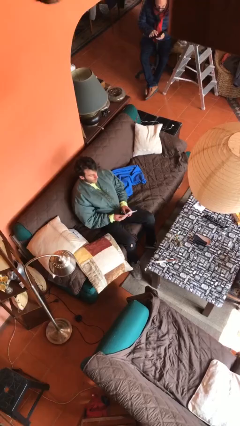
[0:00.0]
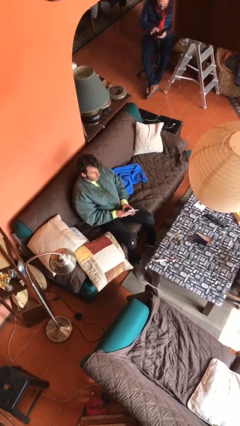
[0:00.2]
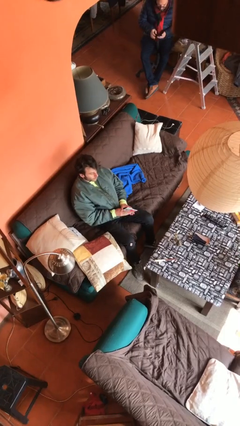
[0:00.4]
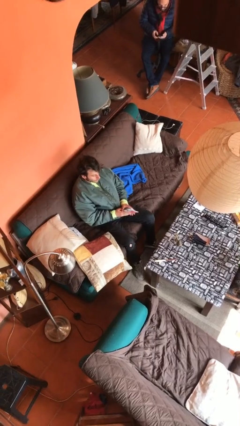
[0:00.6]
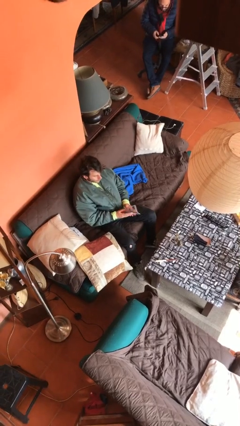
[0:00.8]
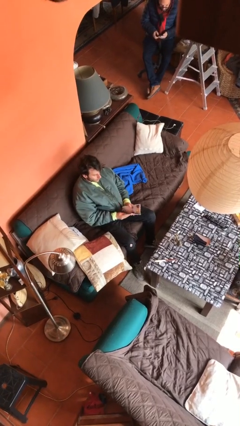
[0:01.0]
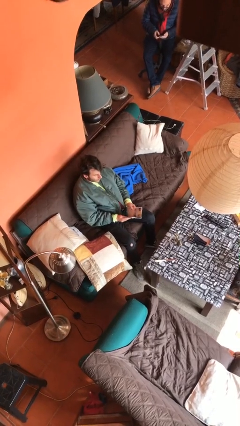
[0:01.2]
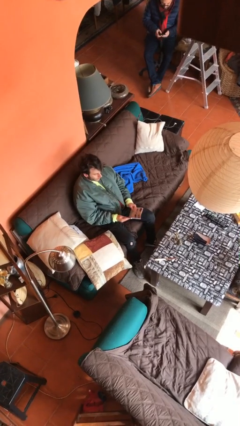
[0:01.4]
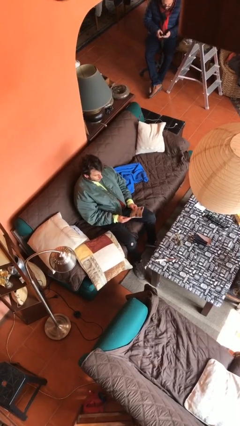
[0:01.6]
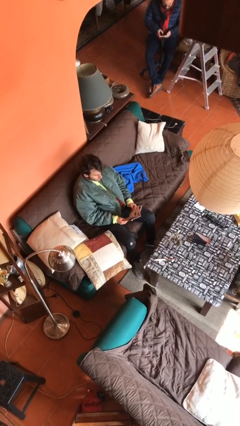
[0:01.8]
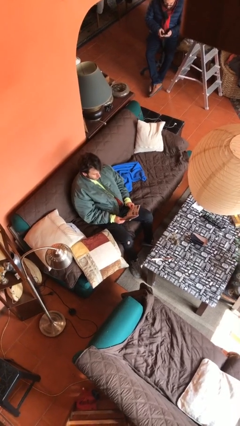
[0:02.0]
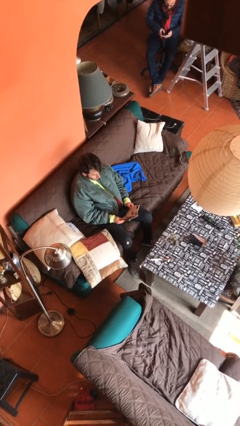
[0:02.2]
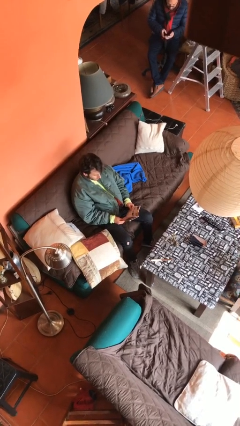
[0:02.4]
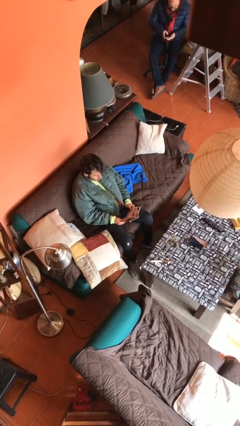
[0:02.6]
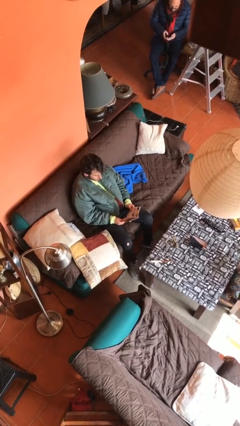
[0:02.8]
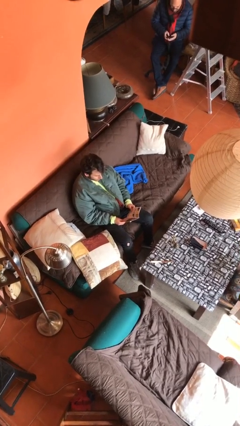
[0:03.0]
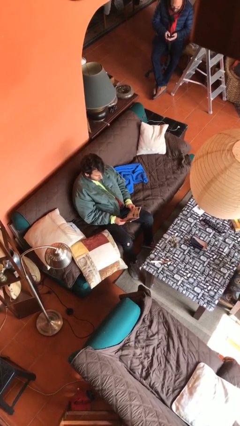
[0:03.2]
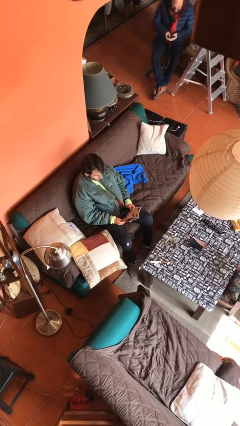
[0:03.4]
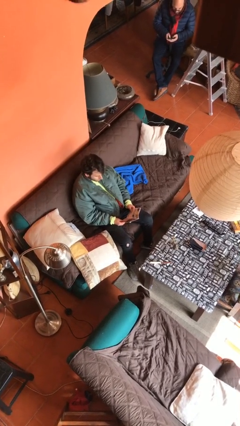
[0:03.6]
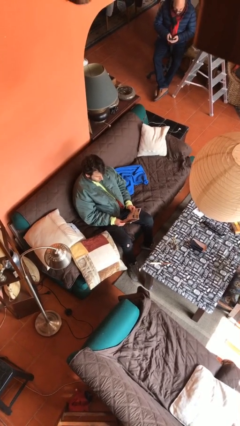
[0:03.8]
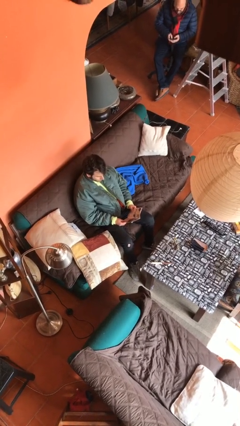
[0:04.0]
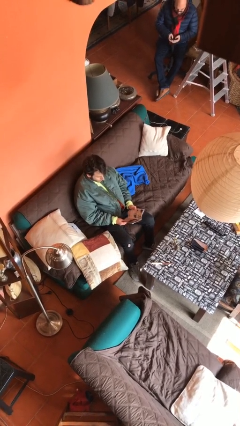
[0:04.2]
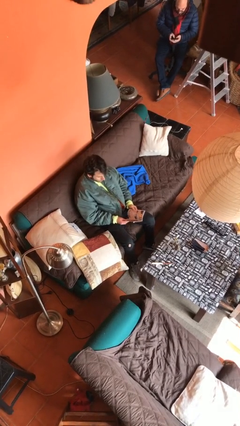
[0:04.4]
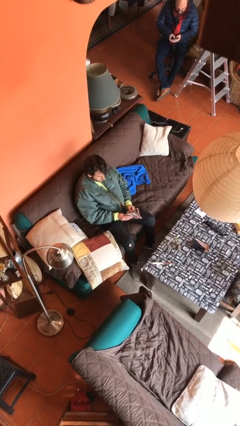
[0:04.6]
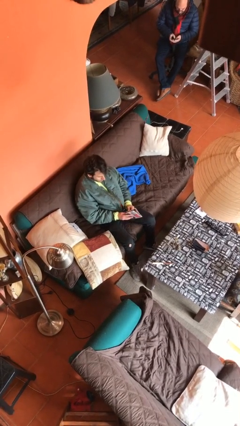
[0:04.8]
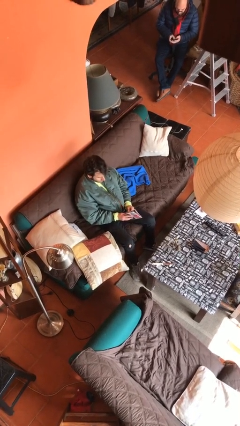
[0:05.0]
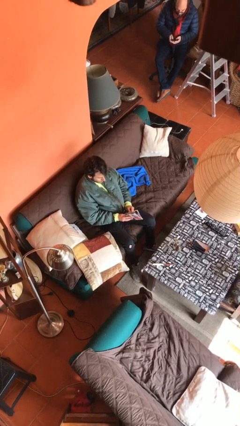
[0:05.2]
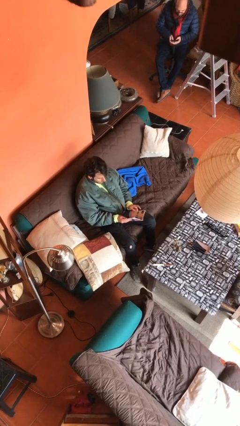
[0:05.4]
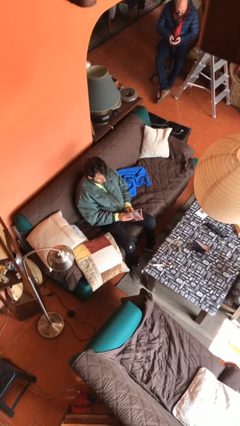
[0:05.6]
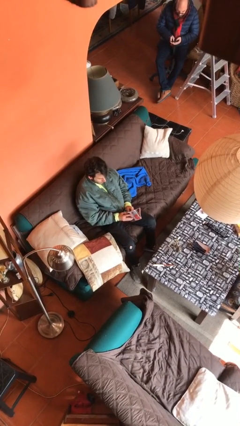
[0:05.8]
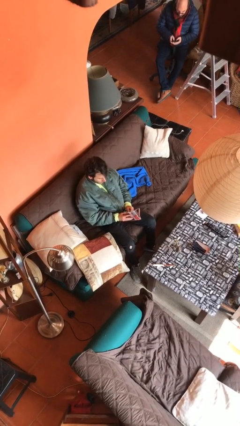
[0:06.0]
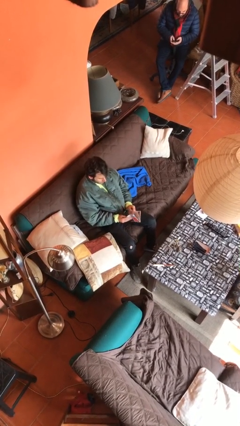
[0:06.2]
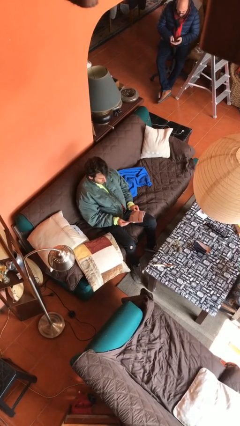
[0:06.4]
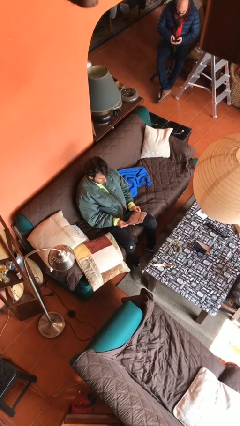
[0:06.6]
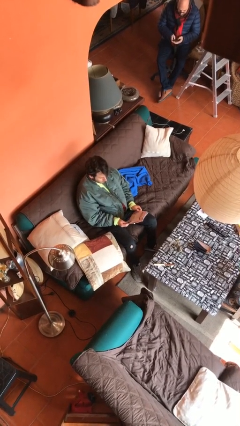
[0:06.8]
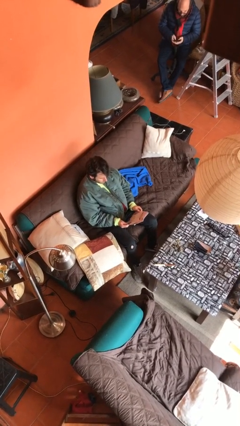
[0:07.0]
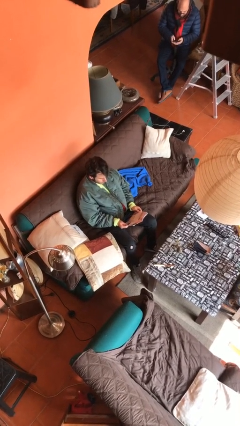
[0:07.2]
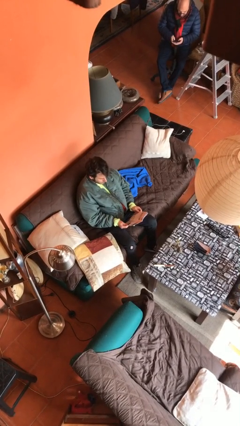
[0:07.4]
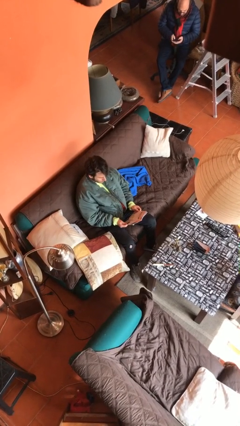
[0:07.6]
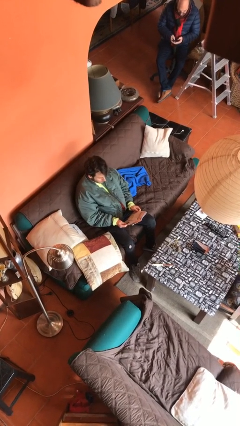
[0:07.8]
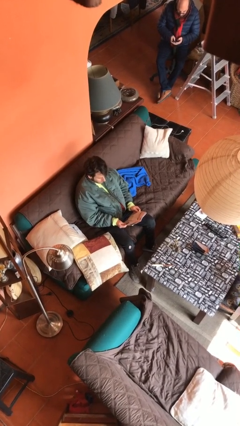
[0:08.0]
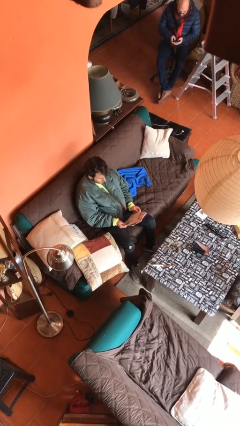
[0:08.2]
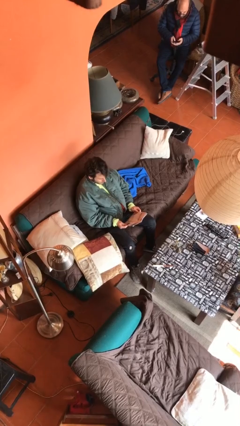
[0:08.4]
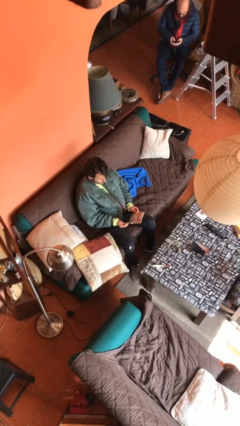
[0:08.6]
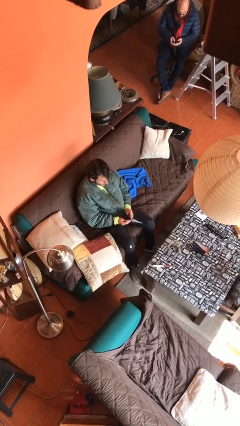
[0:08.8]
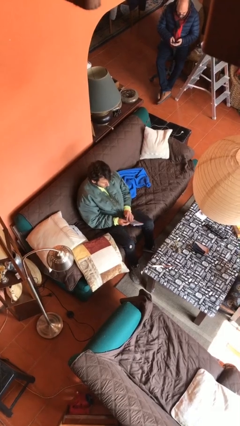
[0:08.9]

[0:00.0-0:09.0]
person reads document

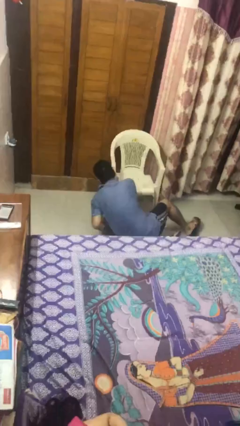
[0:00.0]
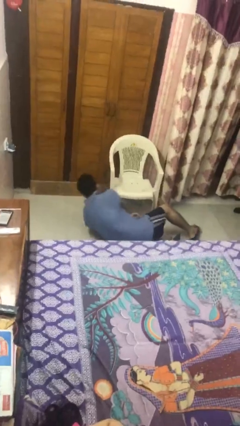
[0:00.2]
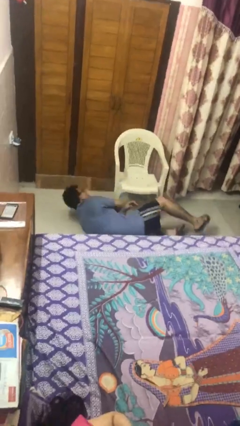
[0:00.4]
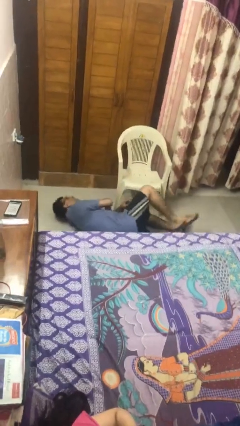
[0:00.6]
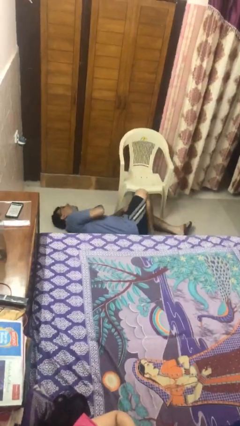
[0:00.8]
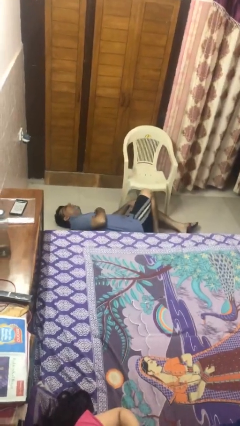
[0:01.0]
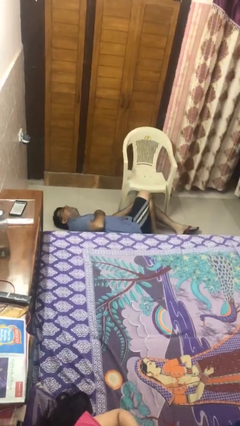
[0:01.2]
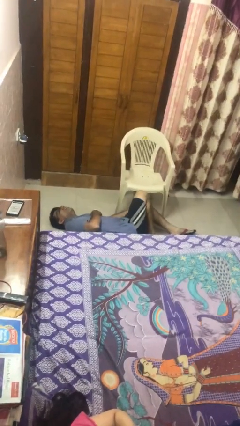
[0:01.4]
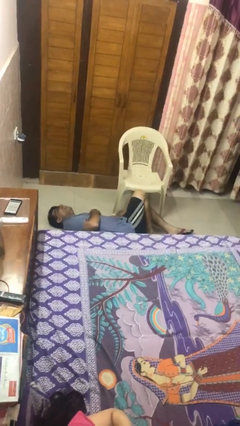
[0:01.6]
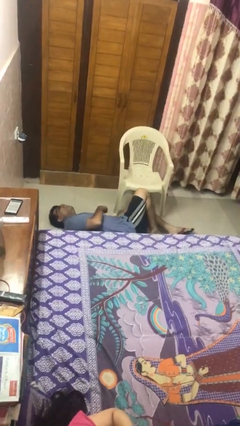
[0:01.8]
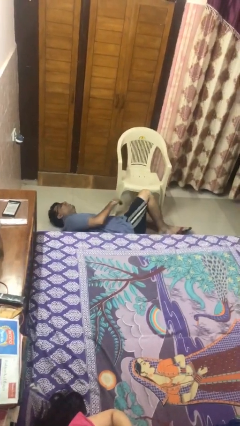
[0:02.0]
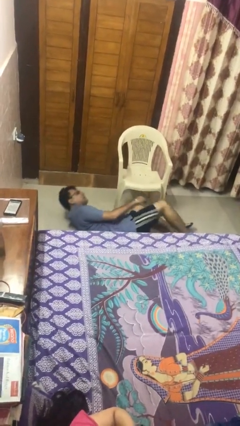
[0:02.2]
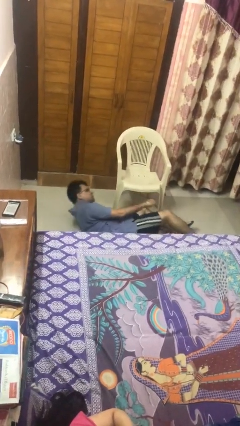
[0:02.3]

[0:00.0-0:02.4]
person lies down on floor

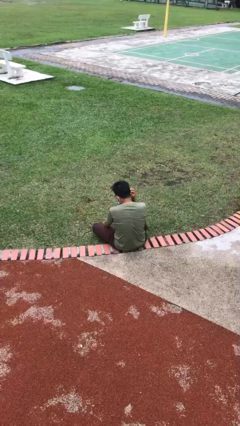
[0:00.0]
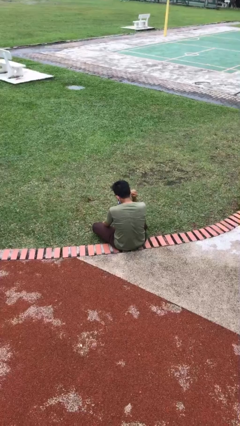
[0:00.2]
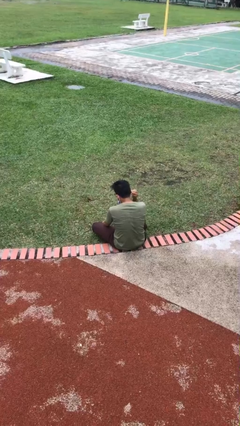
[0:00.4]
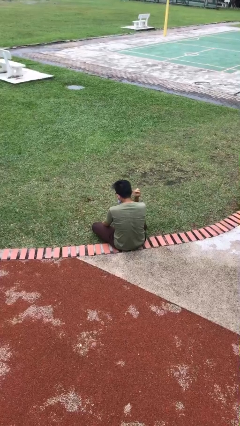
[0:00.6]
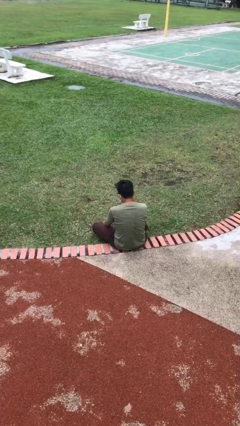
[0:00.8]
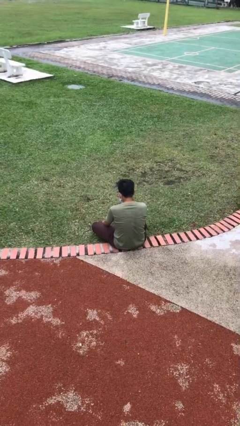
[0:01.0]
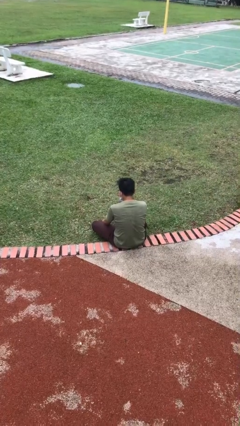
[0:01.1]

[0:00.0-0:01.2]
person touches earlobe

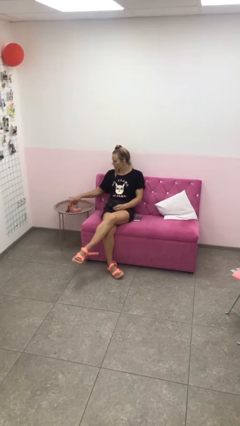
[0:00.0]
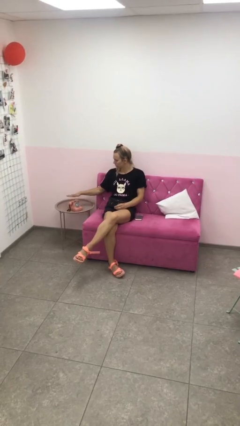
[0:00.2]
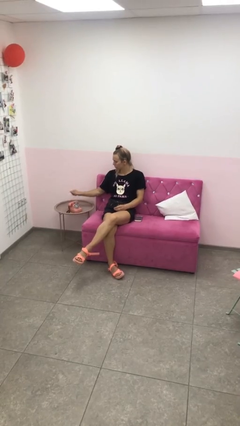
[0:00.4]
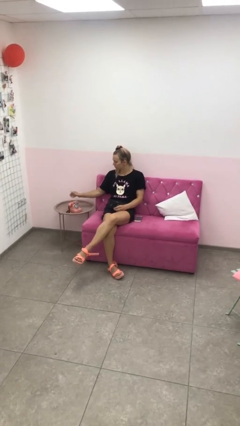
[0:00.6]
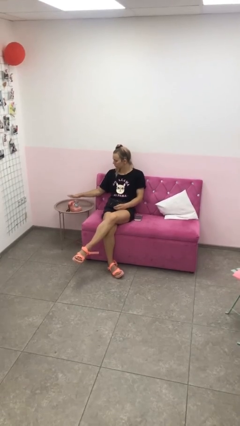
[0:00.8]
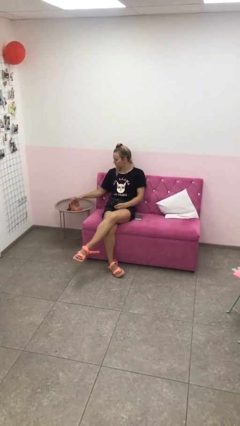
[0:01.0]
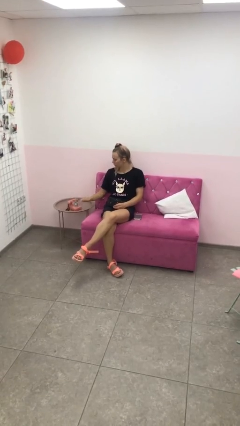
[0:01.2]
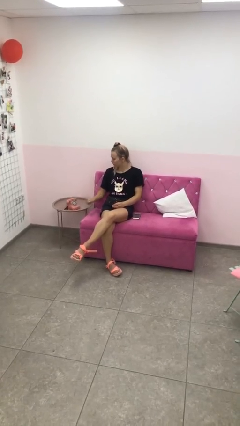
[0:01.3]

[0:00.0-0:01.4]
person waves hand over object

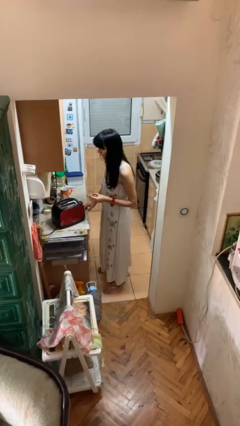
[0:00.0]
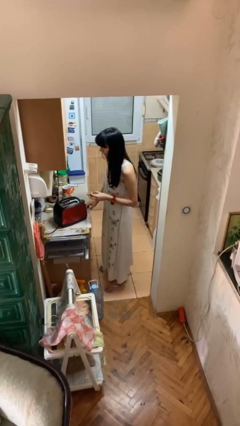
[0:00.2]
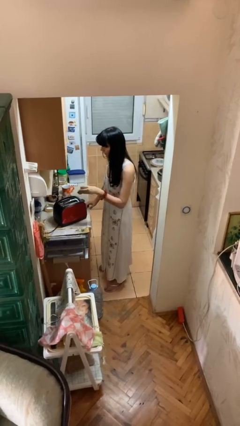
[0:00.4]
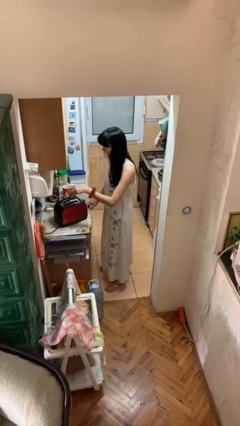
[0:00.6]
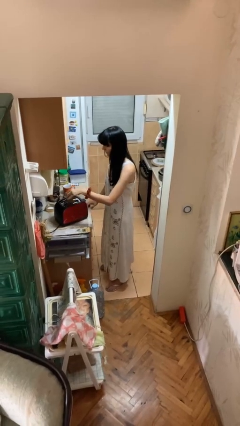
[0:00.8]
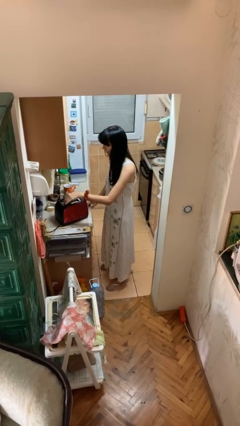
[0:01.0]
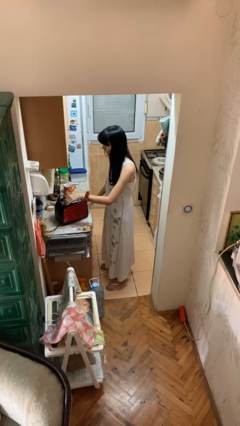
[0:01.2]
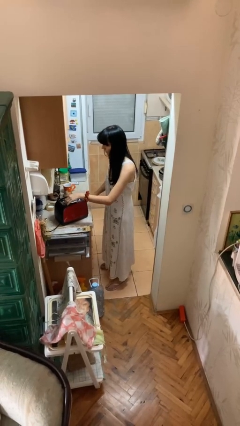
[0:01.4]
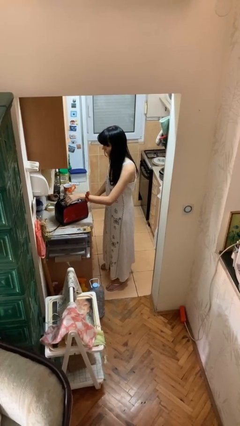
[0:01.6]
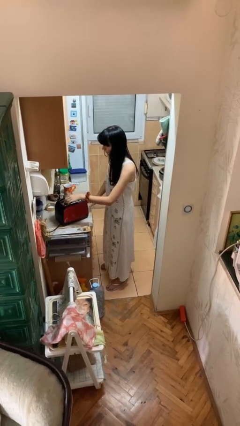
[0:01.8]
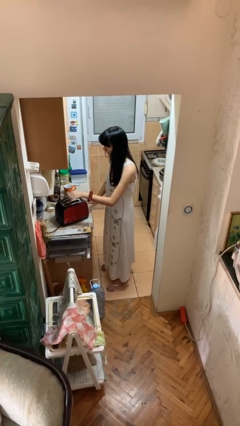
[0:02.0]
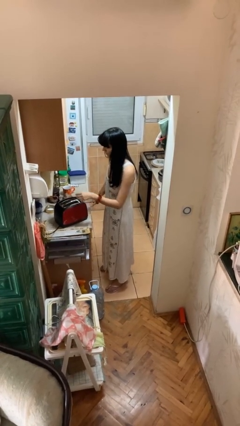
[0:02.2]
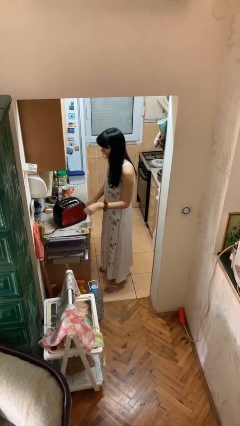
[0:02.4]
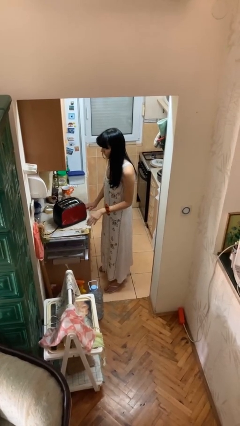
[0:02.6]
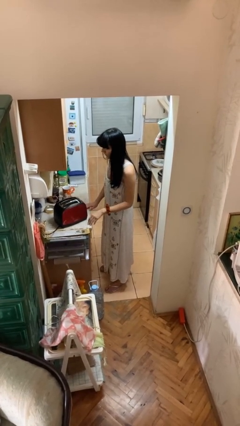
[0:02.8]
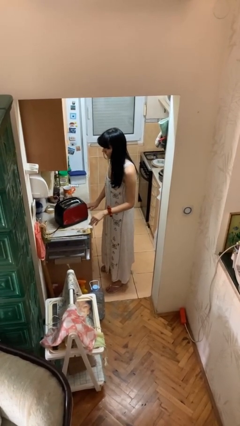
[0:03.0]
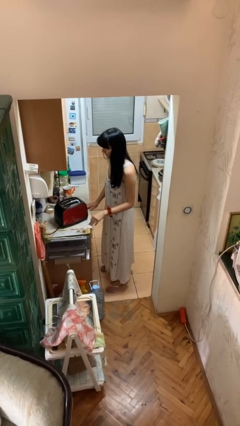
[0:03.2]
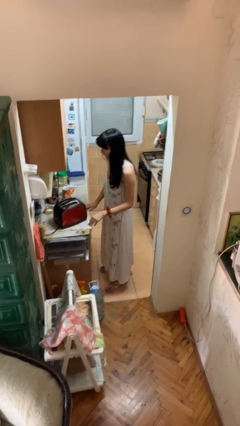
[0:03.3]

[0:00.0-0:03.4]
person puts object into toaster

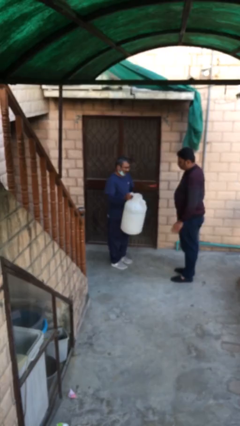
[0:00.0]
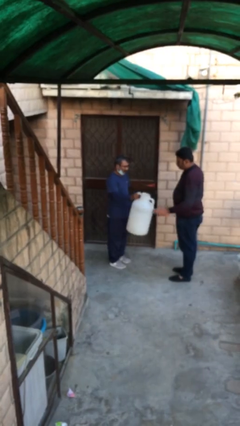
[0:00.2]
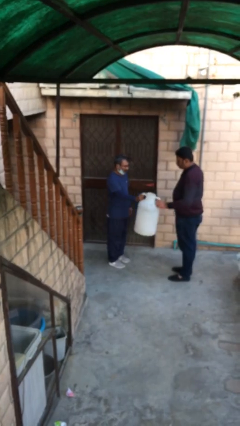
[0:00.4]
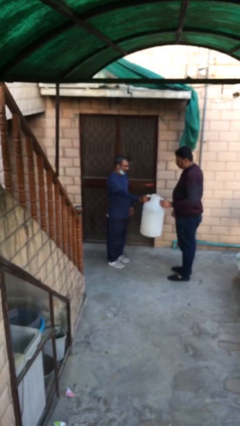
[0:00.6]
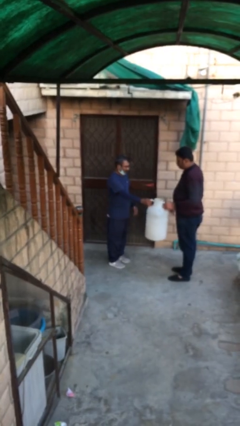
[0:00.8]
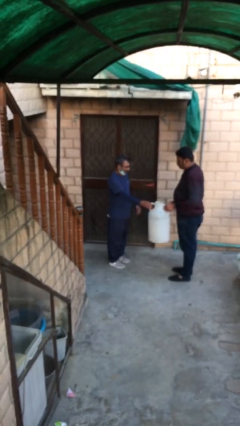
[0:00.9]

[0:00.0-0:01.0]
person transfers object to person
